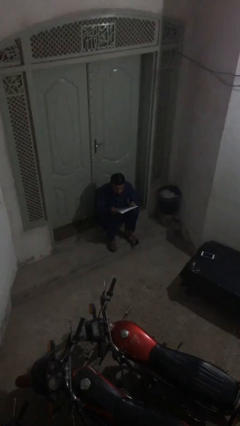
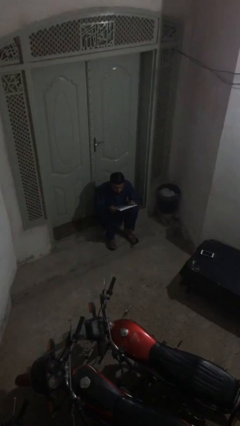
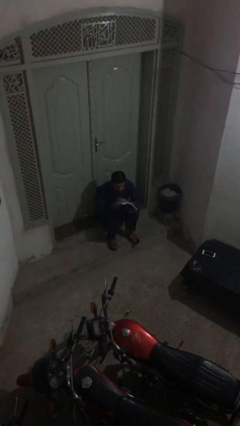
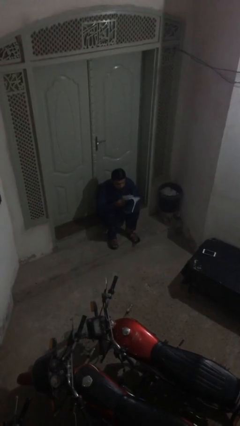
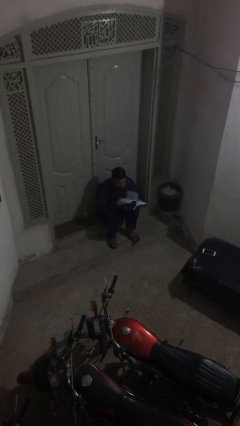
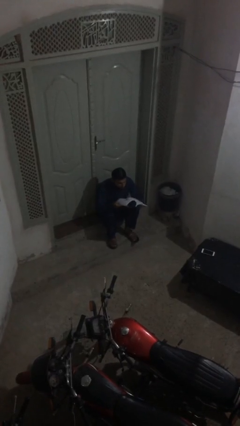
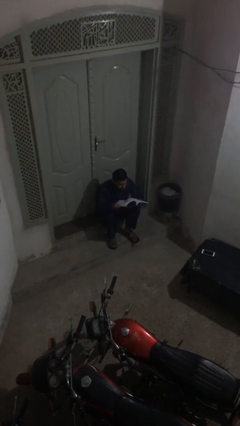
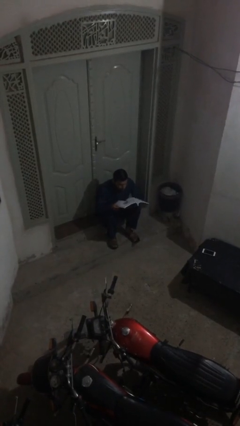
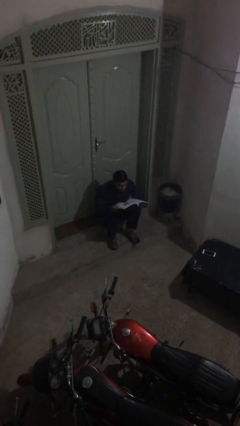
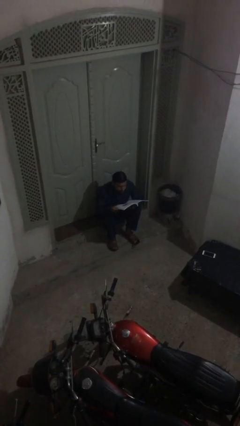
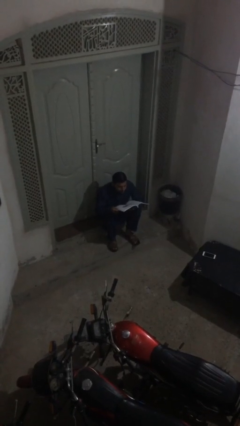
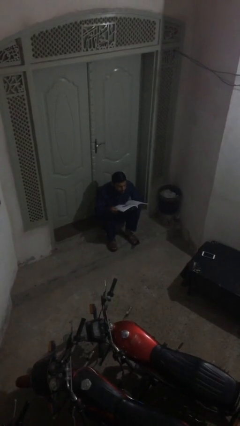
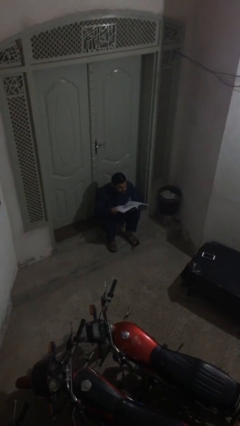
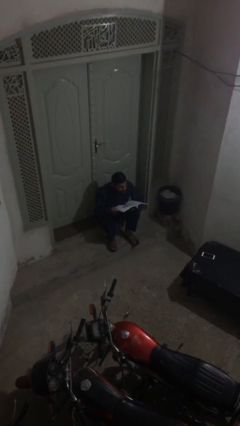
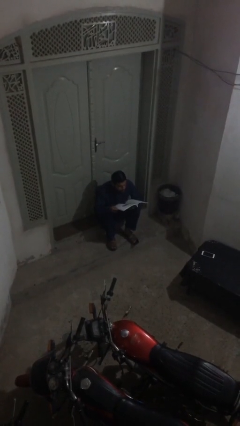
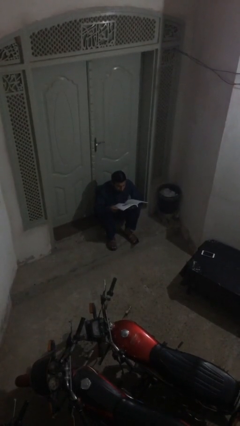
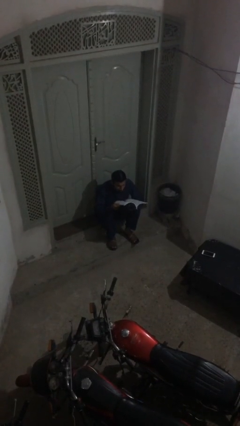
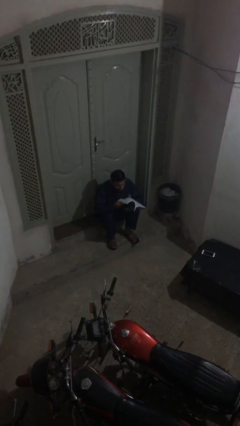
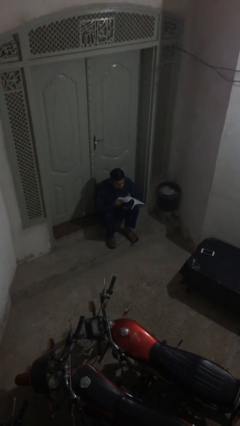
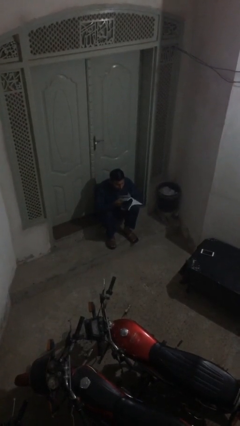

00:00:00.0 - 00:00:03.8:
person reads document

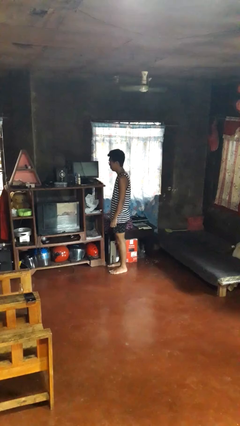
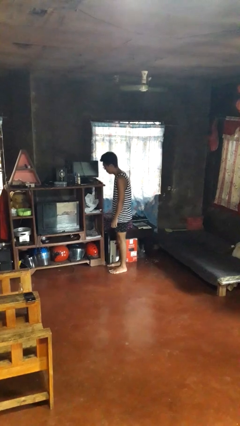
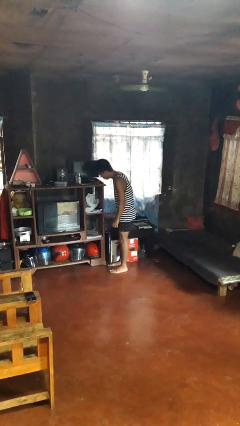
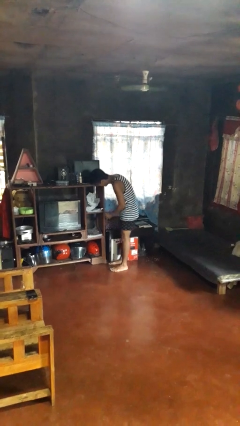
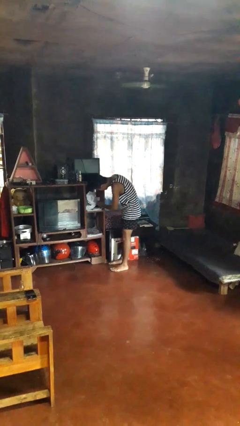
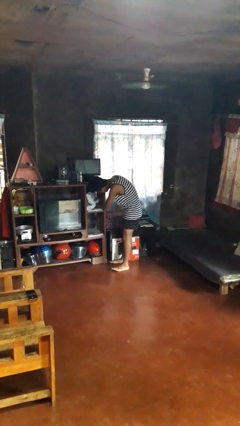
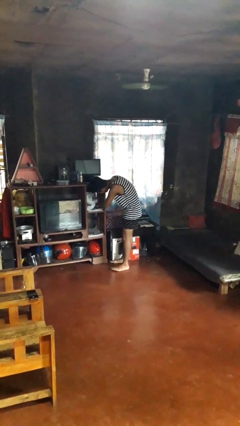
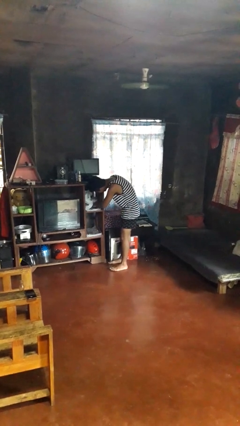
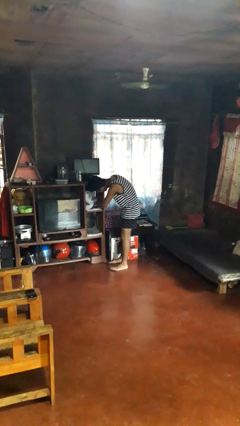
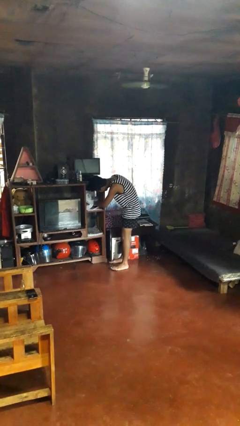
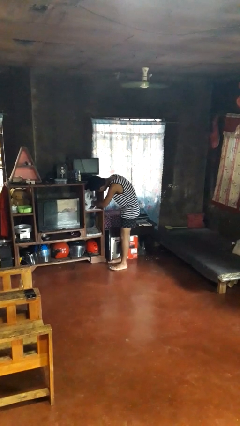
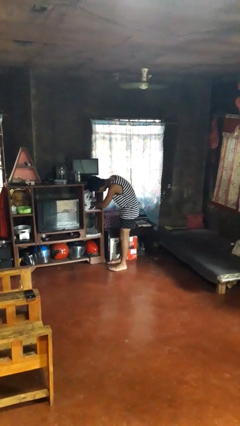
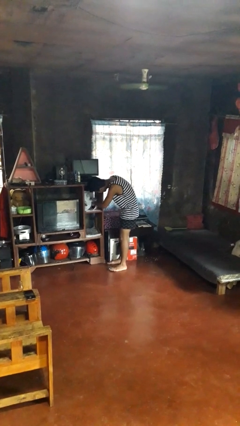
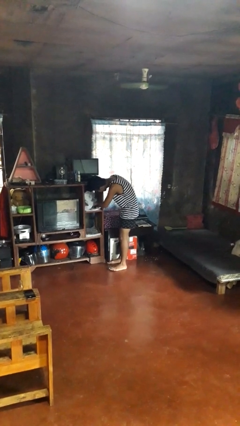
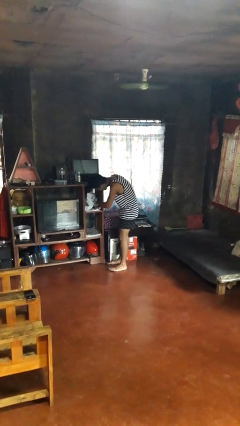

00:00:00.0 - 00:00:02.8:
person searches in cabinet

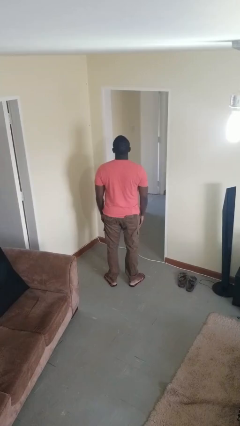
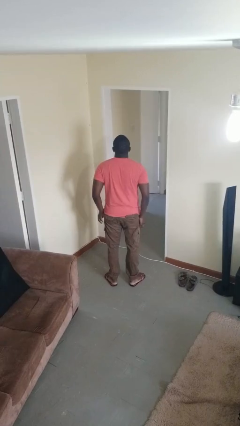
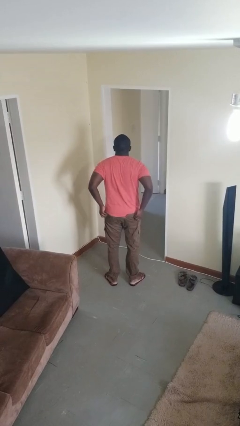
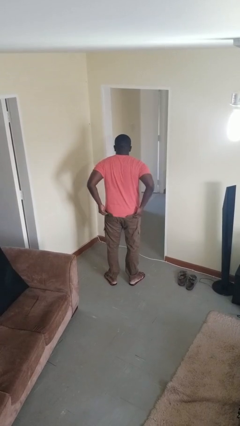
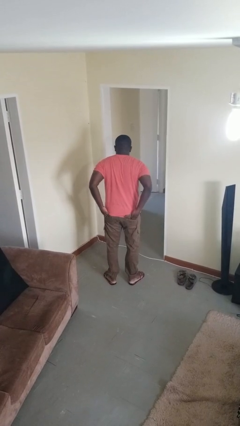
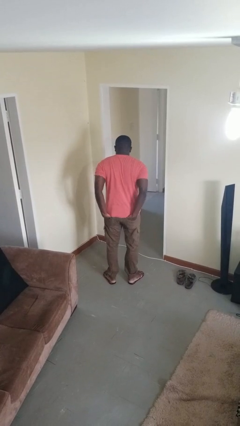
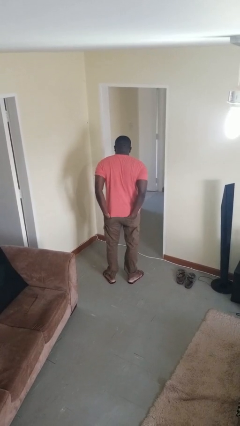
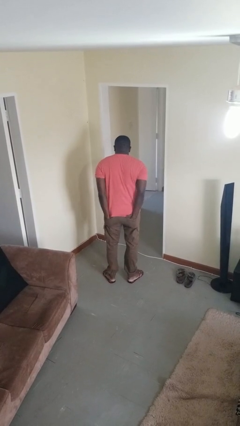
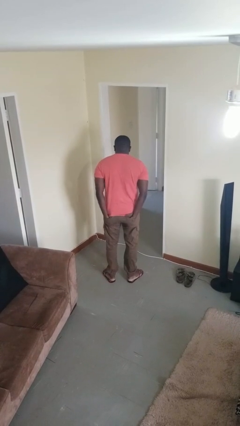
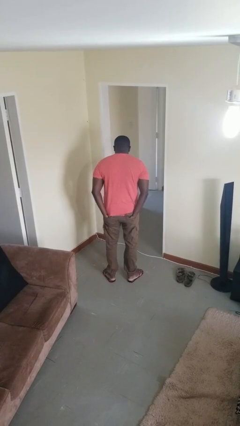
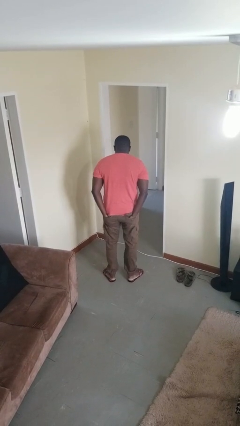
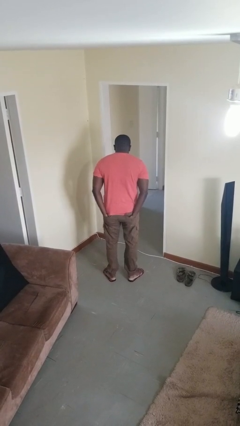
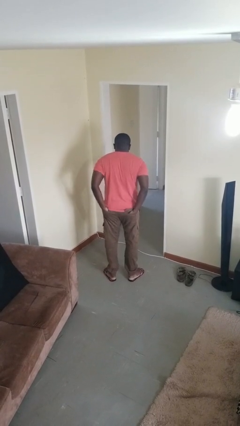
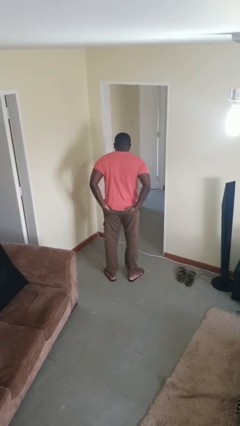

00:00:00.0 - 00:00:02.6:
person puts hands in back pockets

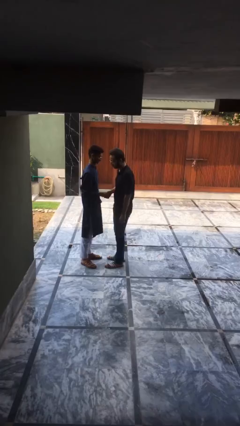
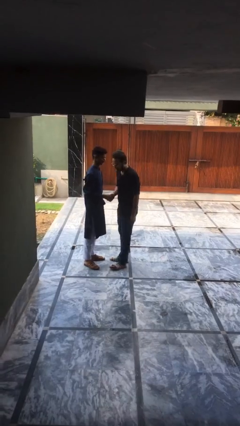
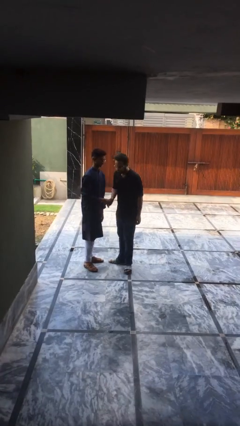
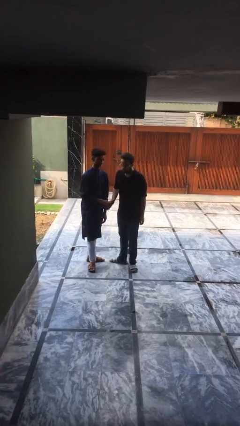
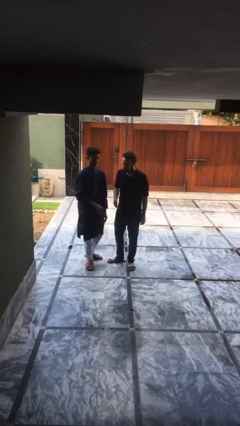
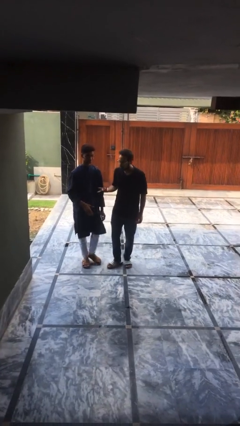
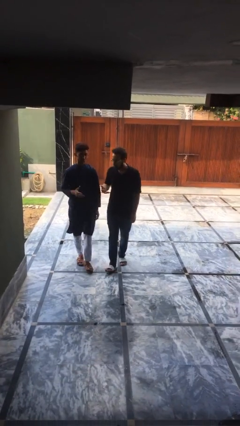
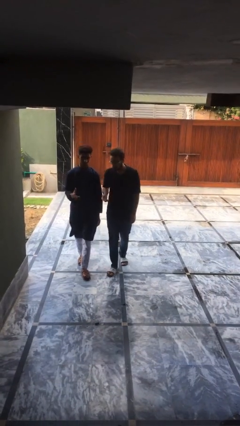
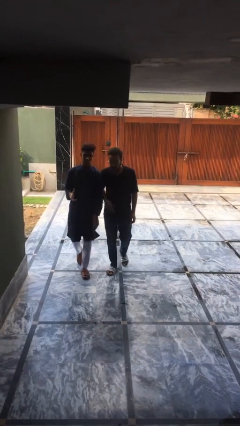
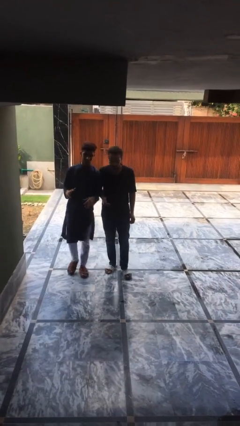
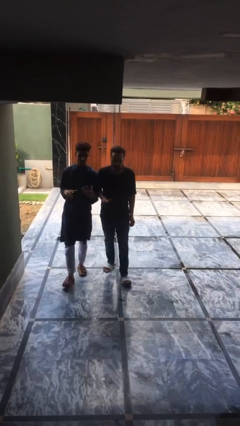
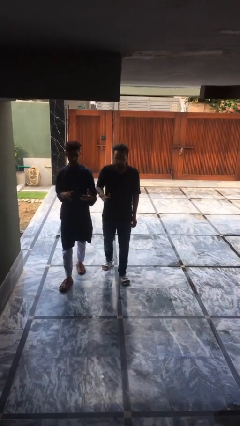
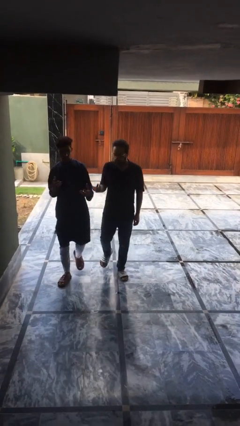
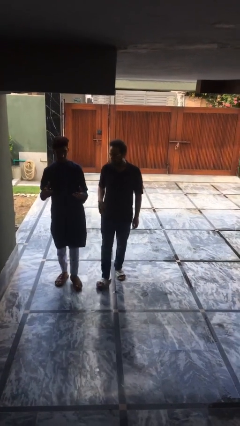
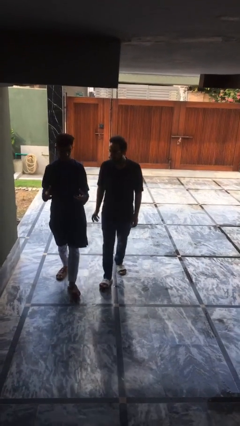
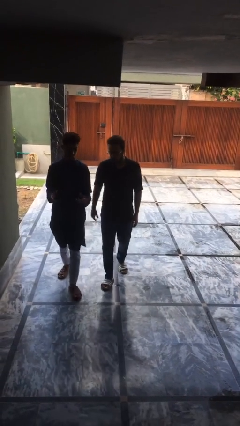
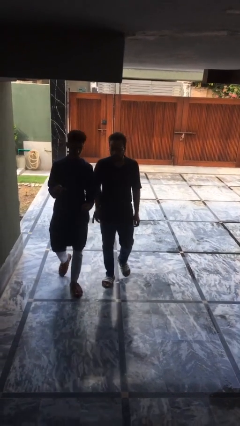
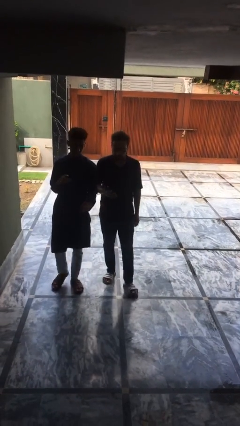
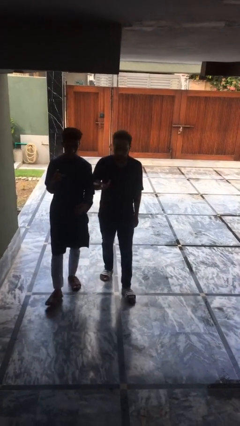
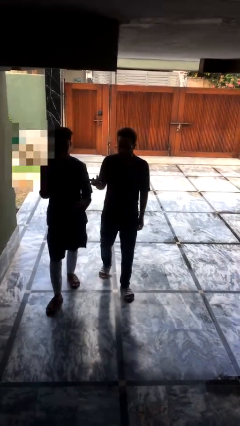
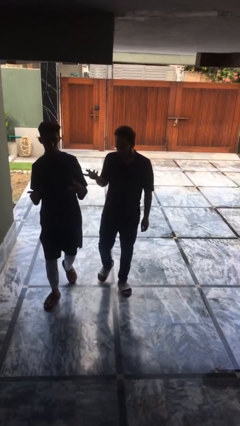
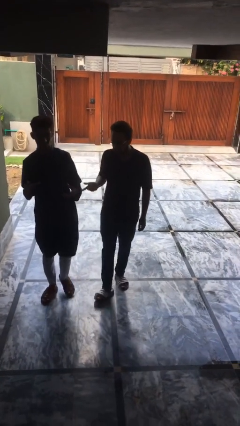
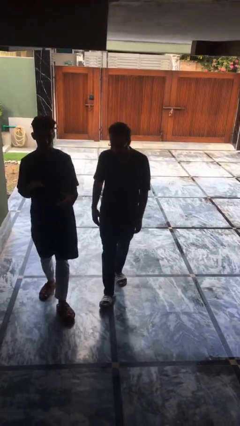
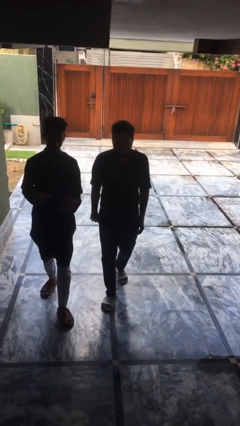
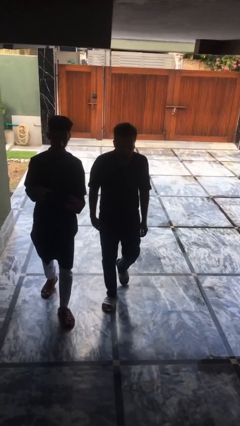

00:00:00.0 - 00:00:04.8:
person talks to person

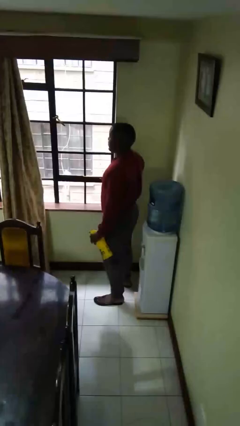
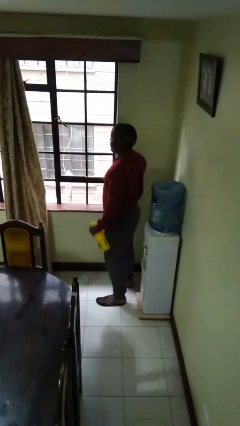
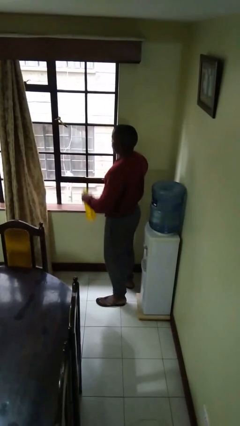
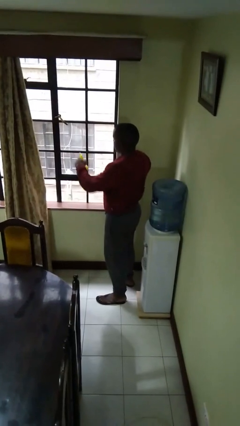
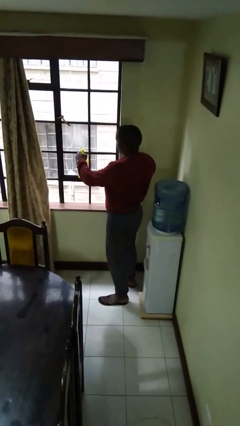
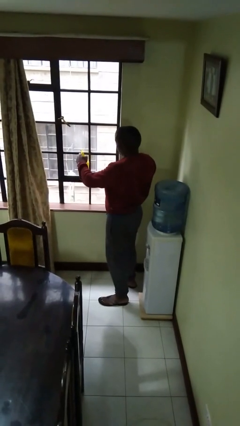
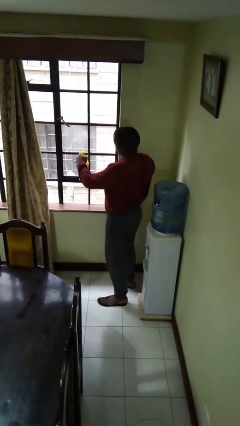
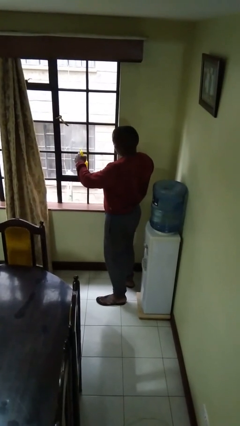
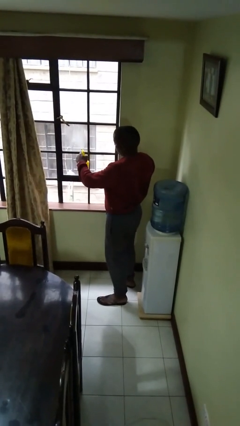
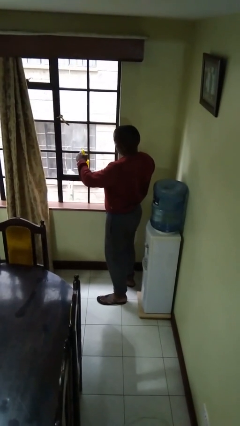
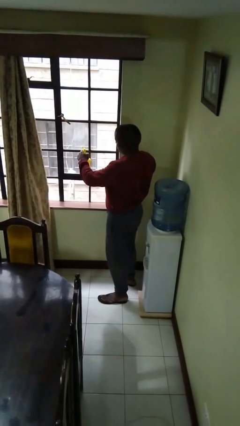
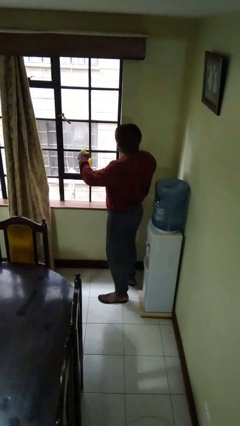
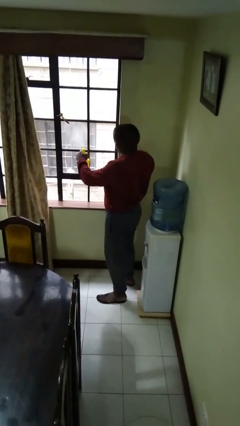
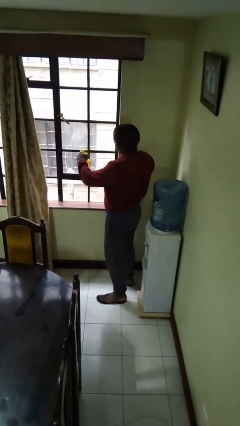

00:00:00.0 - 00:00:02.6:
person sprays from bottle

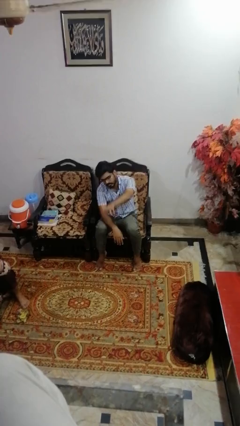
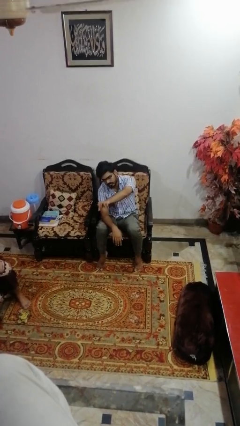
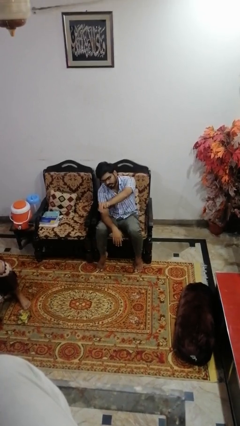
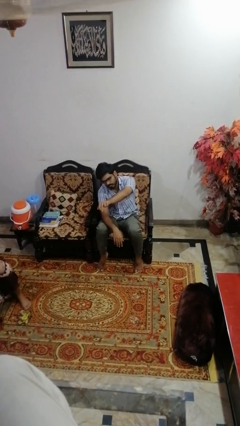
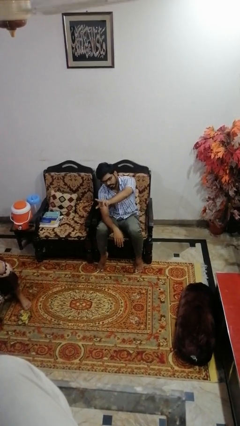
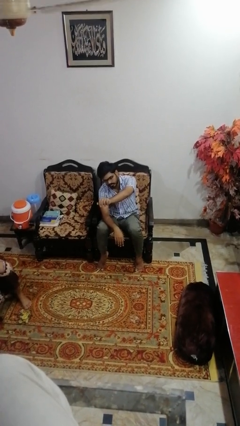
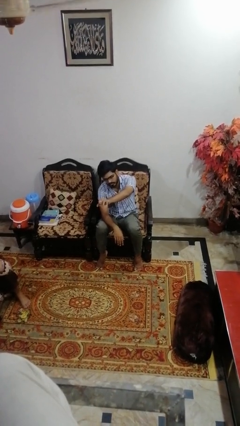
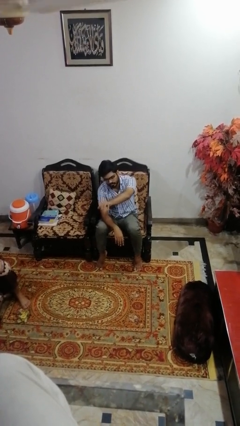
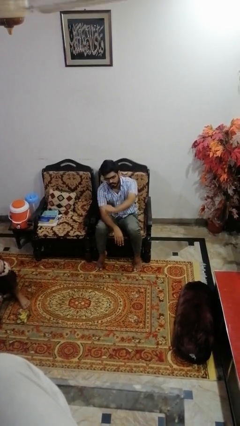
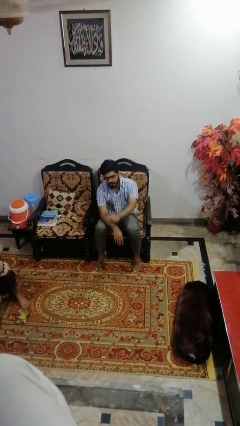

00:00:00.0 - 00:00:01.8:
person gestures come here
